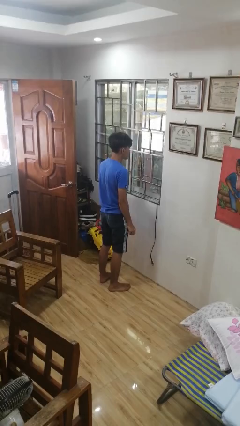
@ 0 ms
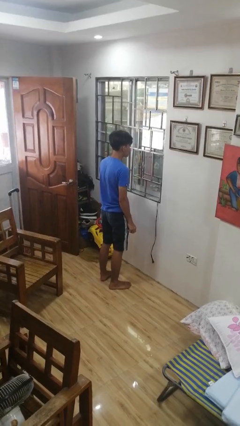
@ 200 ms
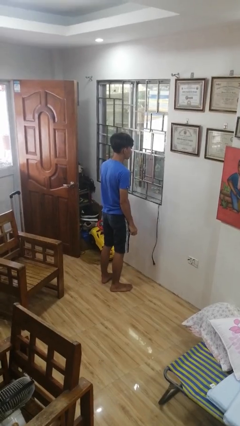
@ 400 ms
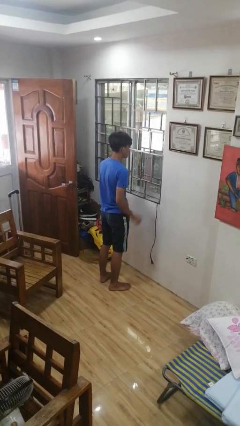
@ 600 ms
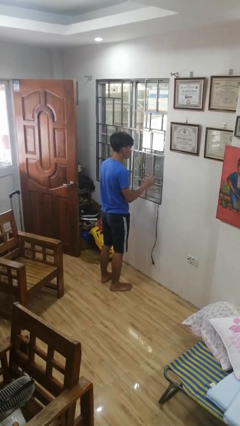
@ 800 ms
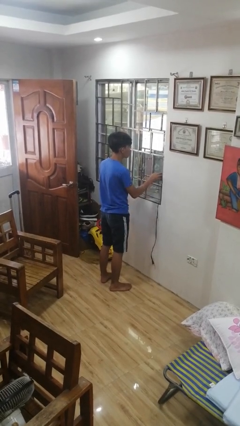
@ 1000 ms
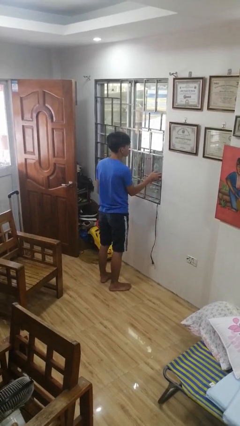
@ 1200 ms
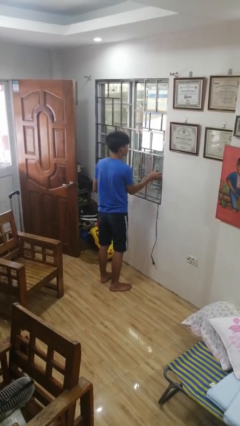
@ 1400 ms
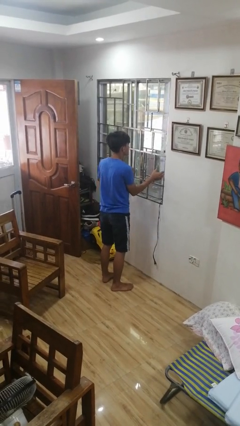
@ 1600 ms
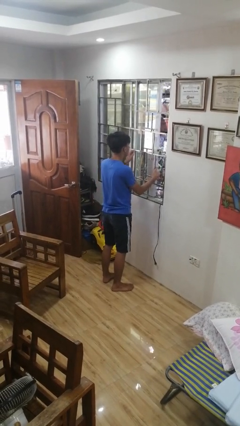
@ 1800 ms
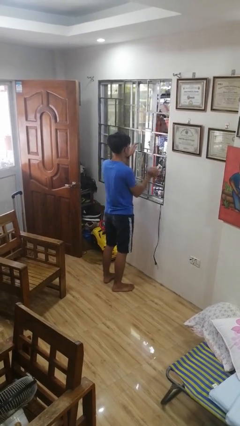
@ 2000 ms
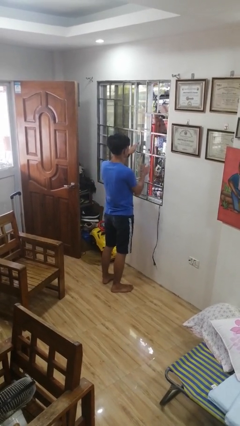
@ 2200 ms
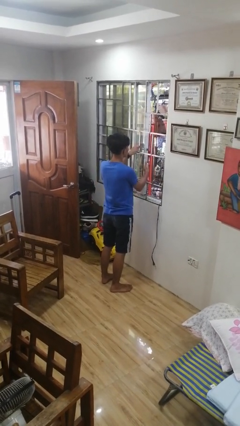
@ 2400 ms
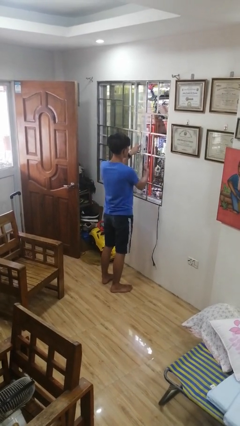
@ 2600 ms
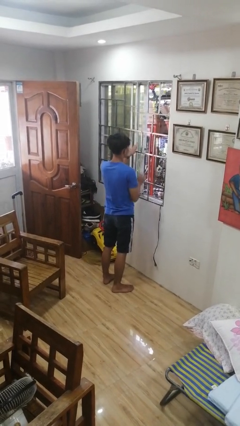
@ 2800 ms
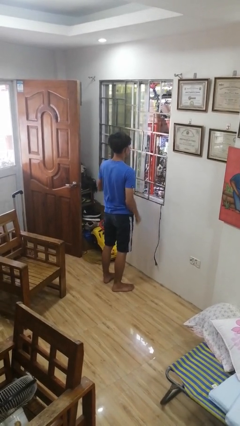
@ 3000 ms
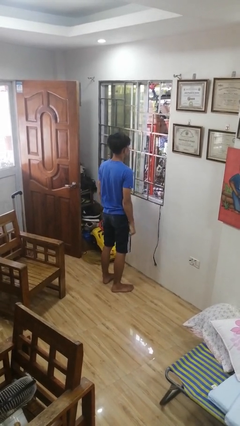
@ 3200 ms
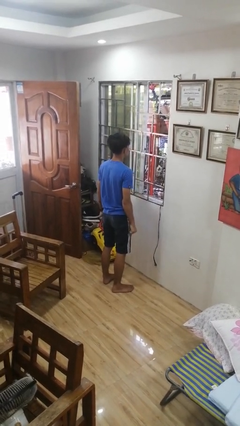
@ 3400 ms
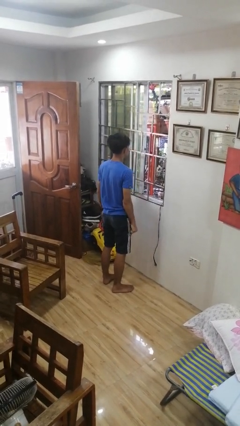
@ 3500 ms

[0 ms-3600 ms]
person opens home window

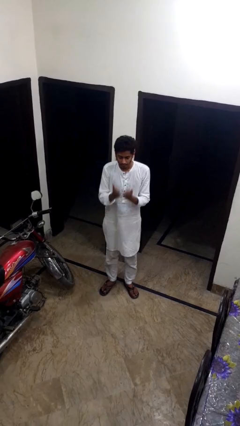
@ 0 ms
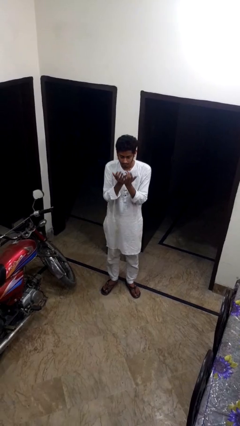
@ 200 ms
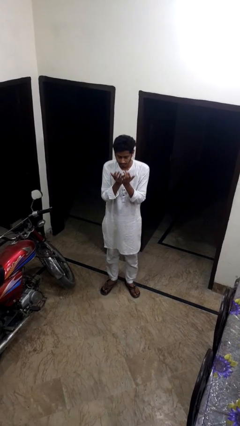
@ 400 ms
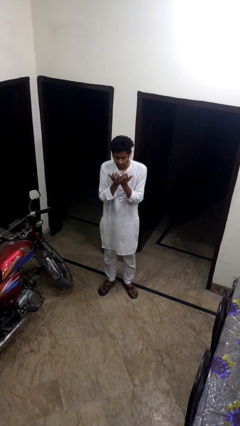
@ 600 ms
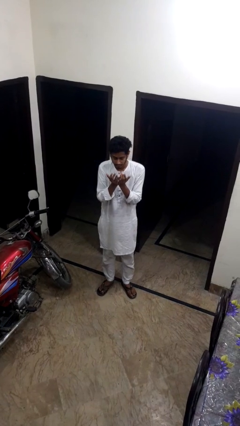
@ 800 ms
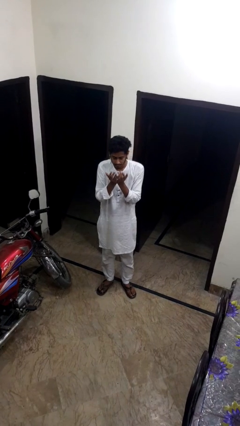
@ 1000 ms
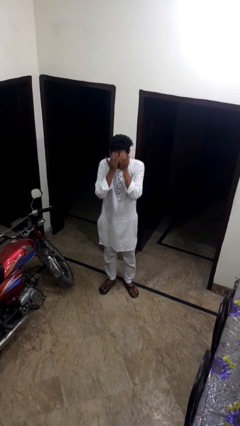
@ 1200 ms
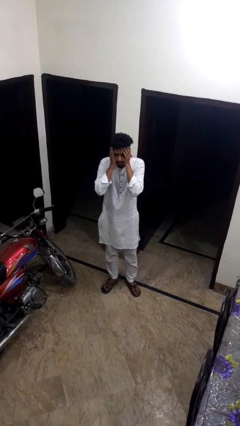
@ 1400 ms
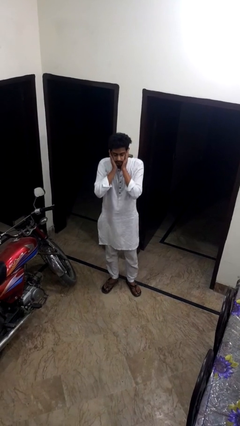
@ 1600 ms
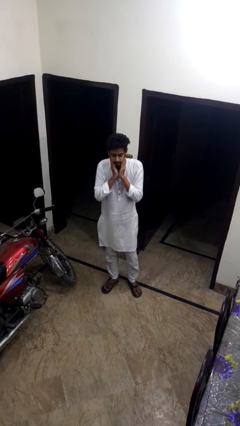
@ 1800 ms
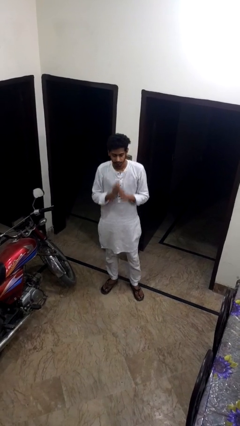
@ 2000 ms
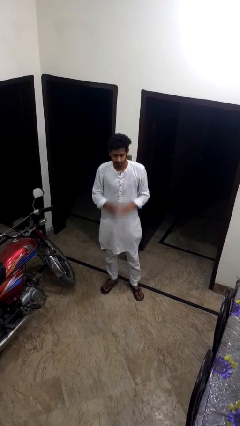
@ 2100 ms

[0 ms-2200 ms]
person prays

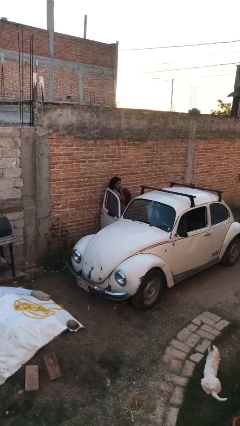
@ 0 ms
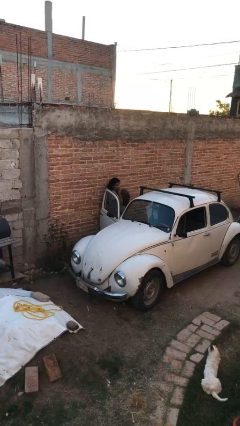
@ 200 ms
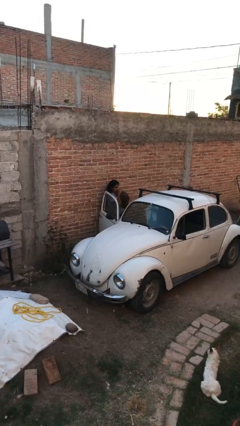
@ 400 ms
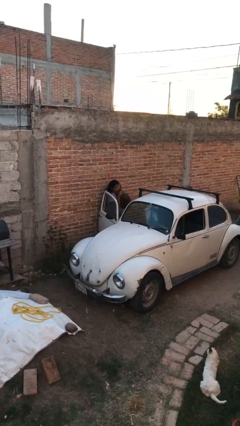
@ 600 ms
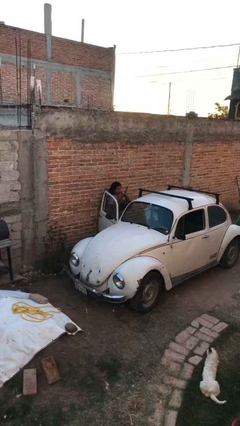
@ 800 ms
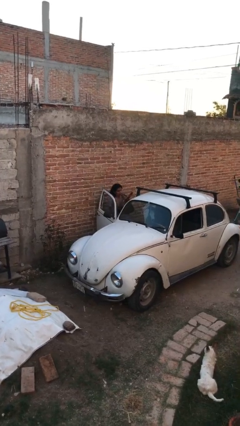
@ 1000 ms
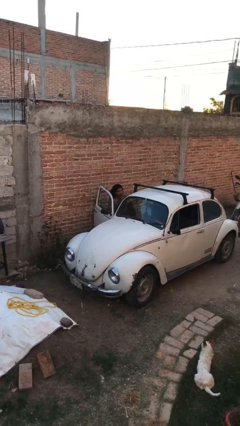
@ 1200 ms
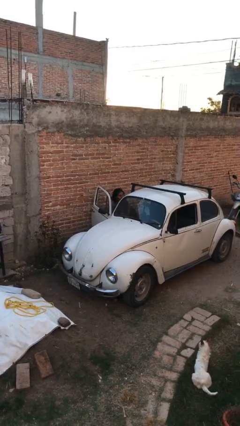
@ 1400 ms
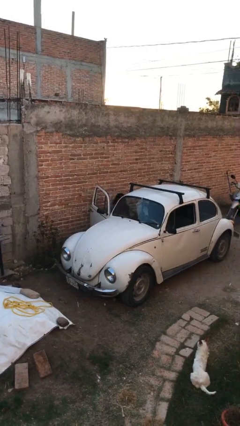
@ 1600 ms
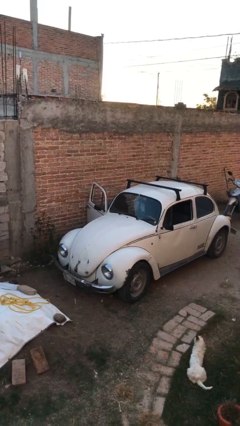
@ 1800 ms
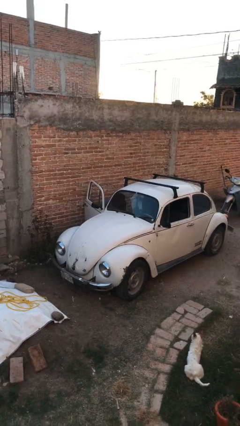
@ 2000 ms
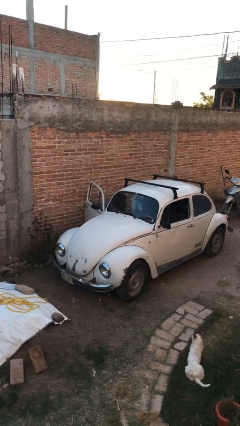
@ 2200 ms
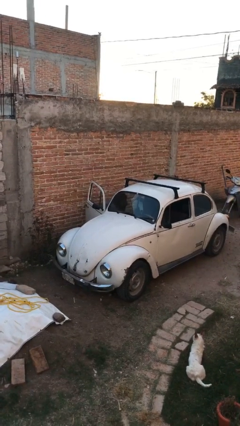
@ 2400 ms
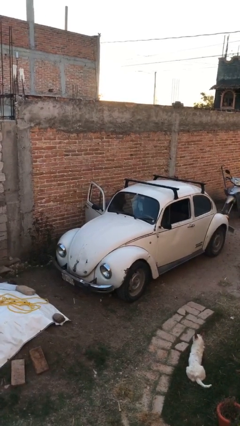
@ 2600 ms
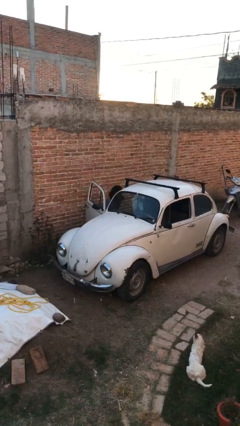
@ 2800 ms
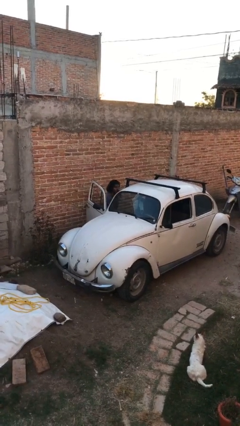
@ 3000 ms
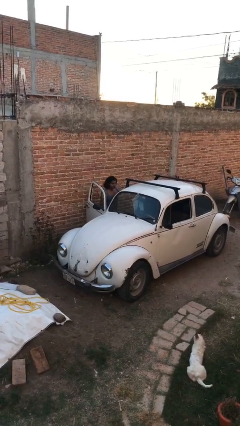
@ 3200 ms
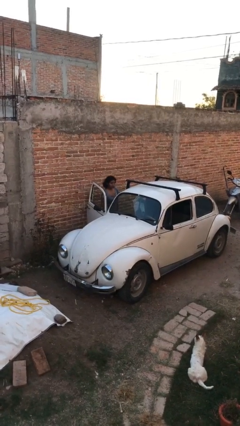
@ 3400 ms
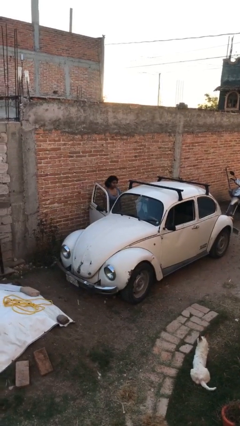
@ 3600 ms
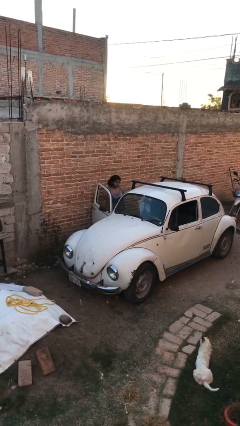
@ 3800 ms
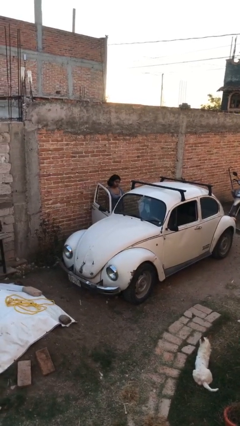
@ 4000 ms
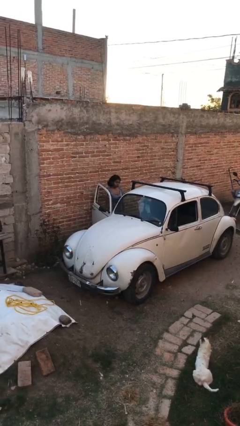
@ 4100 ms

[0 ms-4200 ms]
person loads car

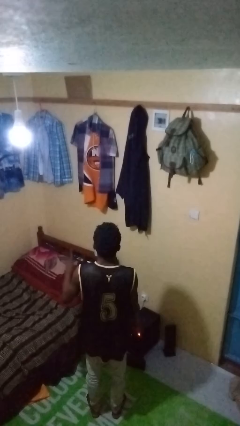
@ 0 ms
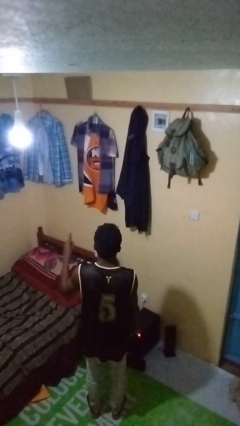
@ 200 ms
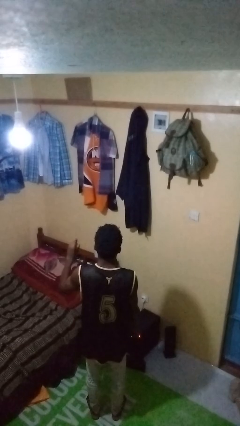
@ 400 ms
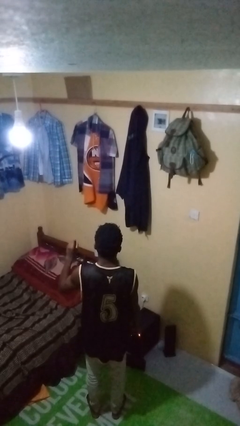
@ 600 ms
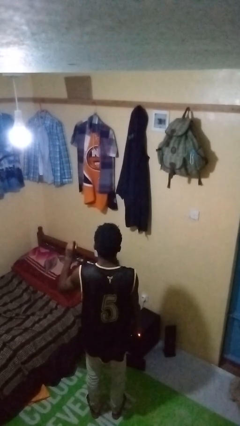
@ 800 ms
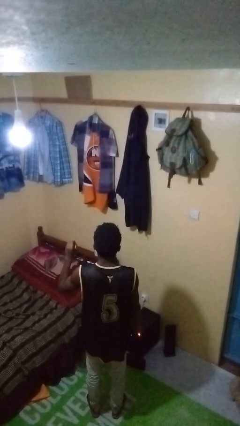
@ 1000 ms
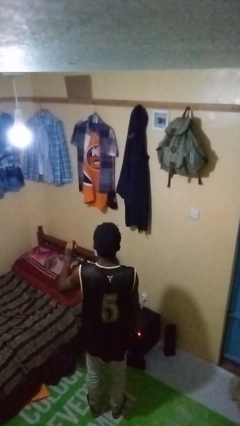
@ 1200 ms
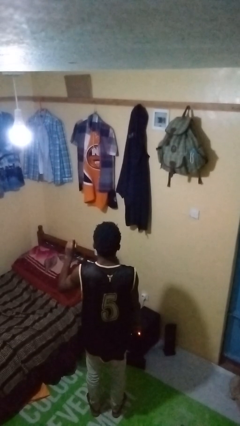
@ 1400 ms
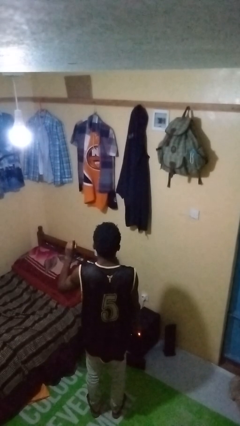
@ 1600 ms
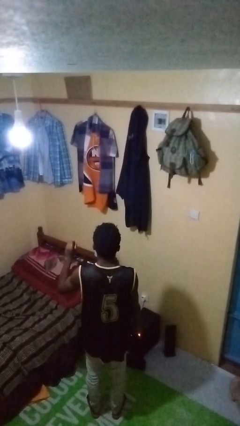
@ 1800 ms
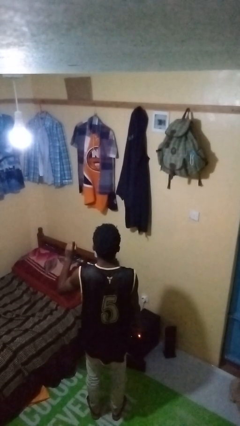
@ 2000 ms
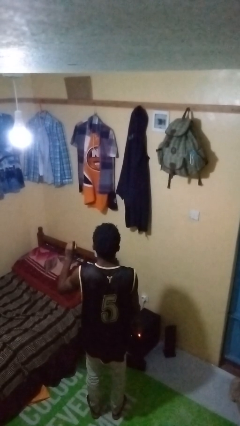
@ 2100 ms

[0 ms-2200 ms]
person gestures number one

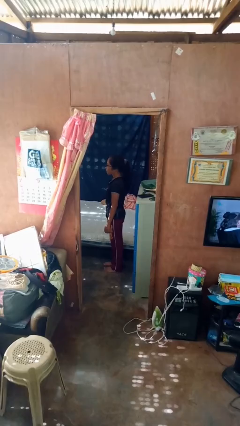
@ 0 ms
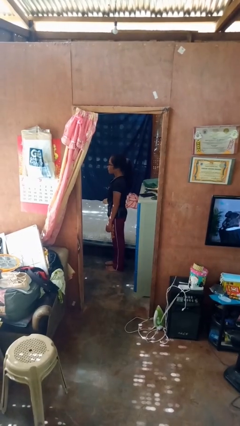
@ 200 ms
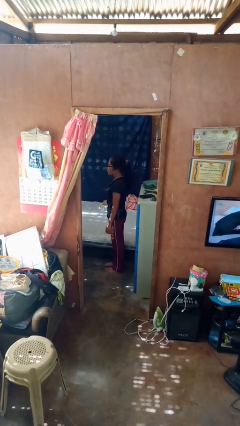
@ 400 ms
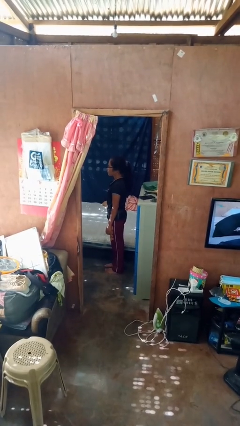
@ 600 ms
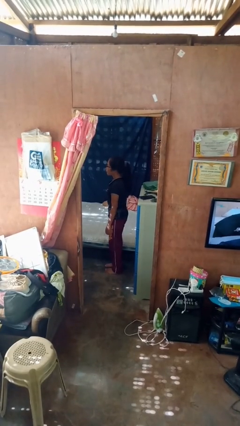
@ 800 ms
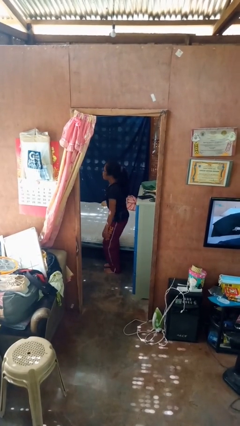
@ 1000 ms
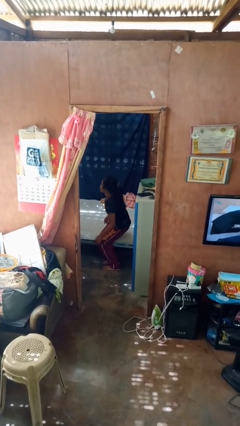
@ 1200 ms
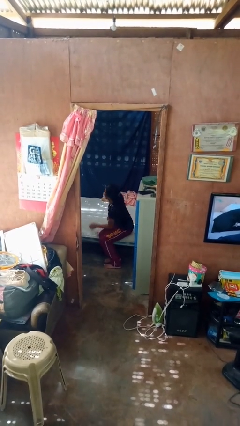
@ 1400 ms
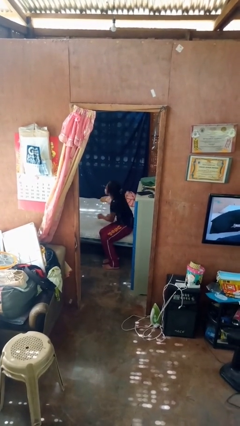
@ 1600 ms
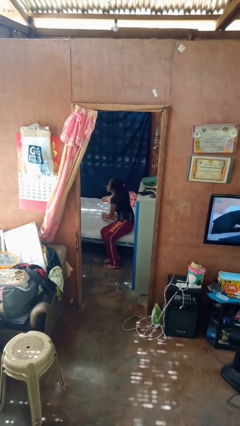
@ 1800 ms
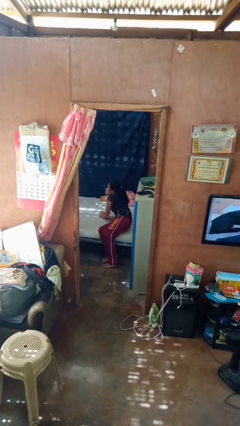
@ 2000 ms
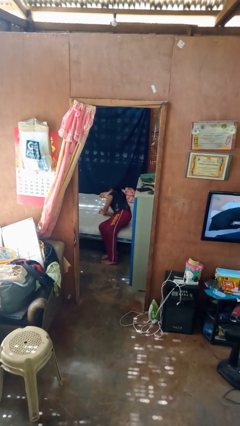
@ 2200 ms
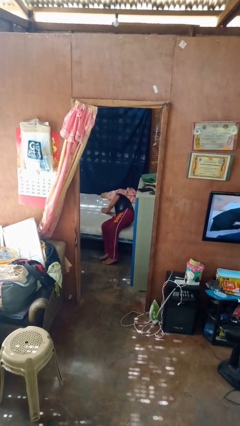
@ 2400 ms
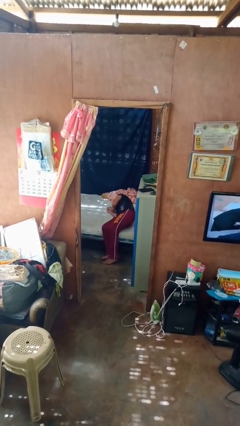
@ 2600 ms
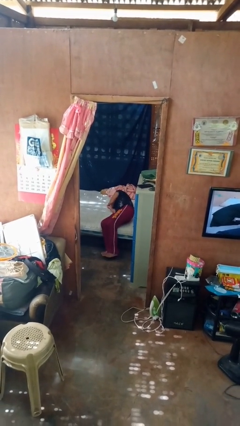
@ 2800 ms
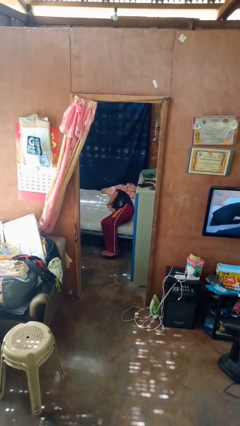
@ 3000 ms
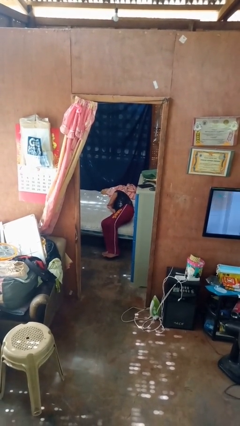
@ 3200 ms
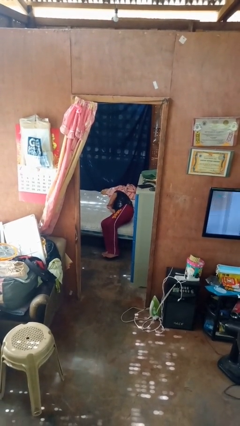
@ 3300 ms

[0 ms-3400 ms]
person lies down on bed

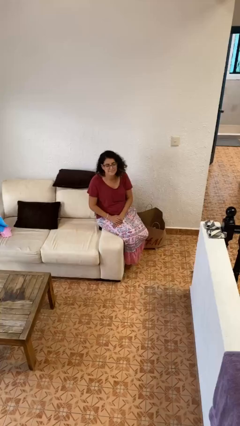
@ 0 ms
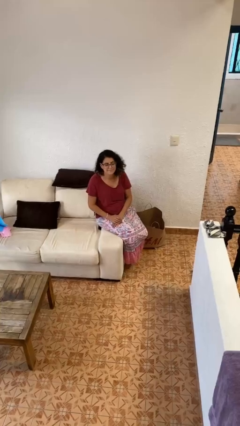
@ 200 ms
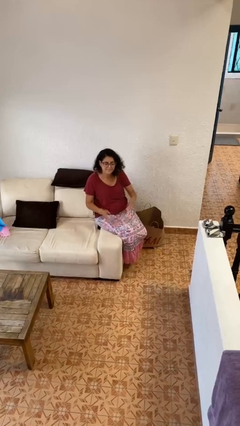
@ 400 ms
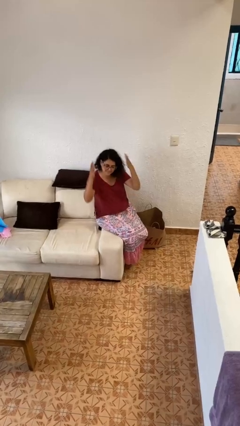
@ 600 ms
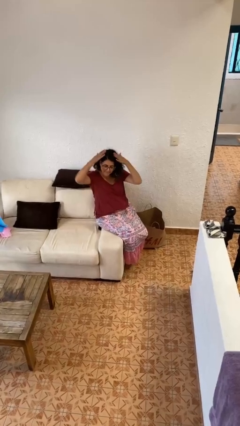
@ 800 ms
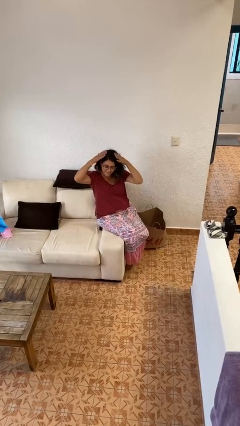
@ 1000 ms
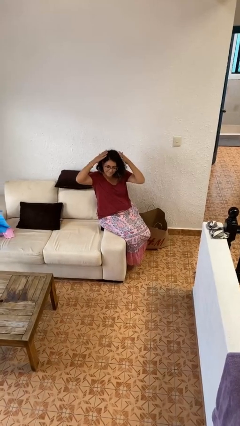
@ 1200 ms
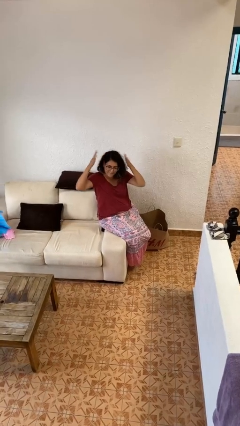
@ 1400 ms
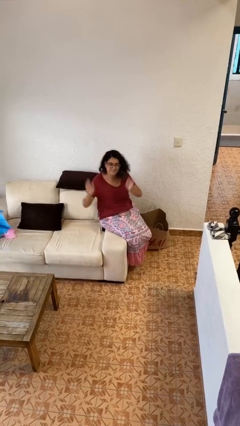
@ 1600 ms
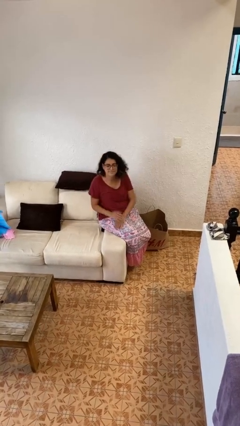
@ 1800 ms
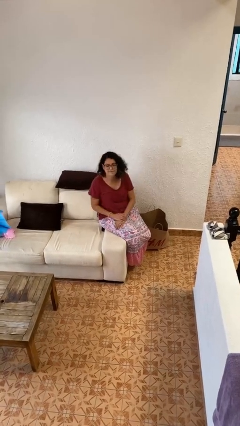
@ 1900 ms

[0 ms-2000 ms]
person pats head
